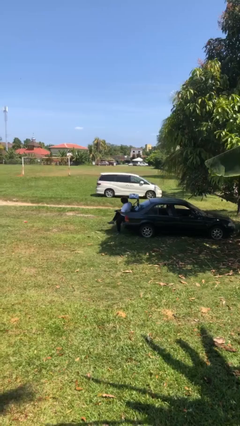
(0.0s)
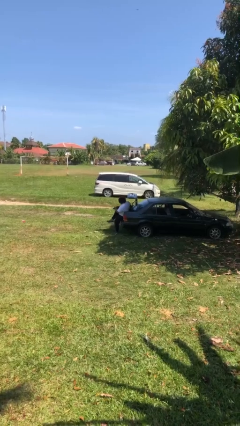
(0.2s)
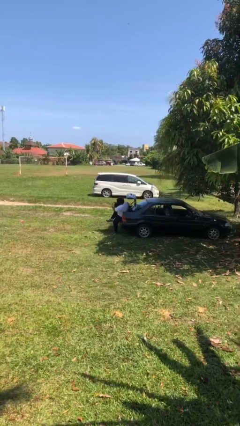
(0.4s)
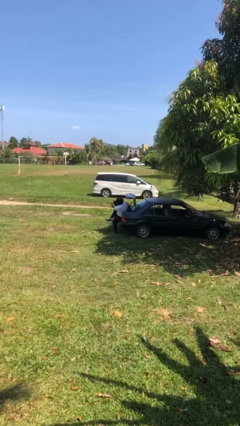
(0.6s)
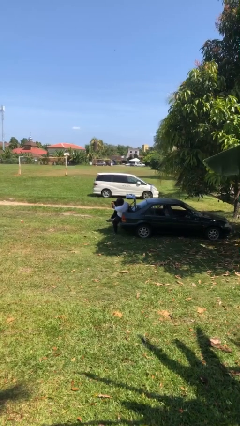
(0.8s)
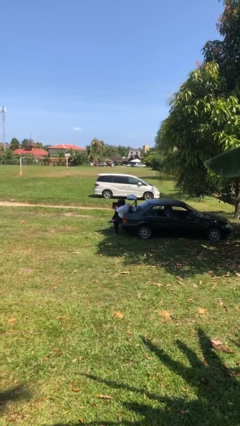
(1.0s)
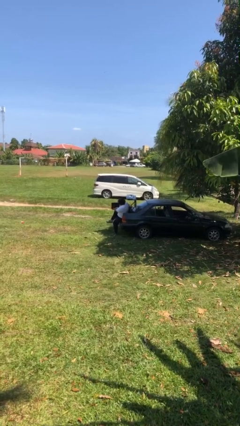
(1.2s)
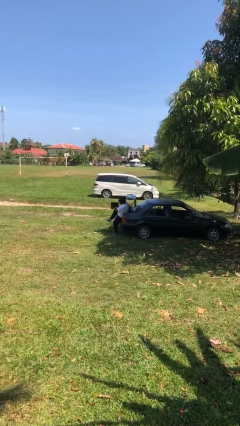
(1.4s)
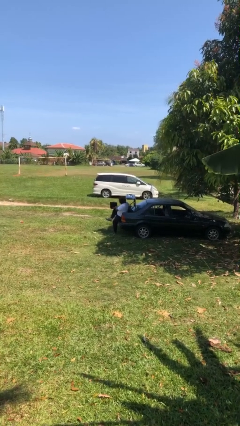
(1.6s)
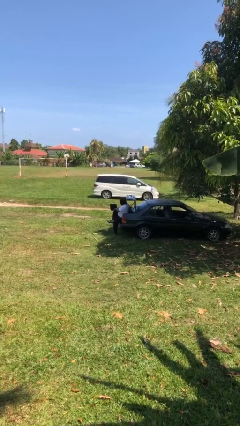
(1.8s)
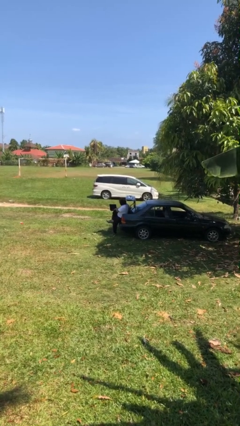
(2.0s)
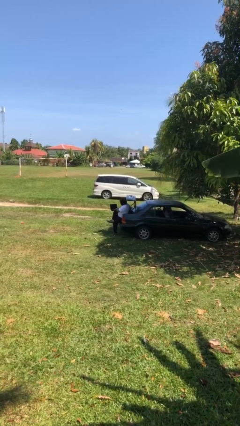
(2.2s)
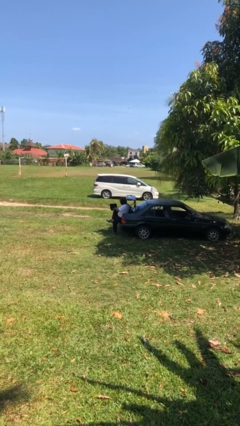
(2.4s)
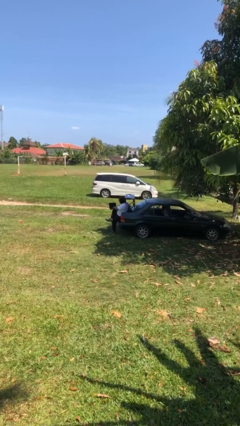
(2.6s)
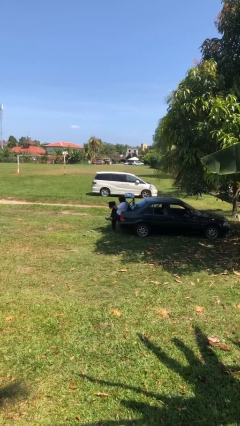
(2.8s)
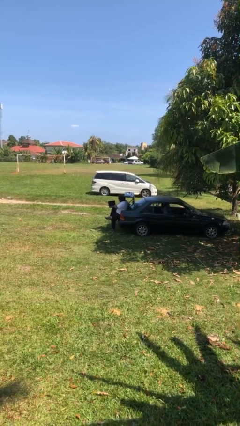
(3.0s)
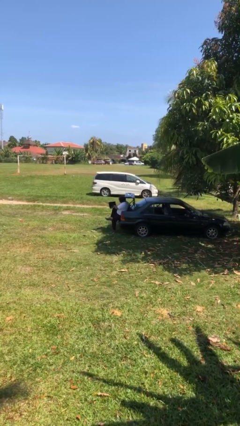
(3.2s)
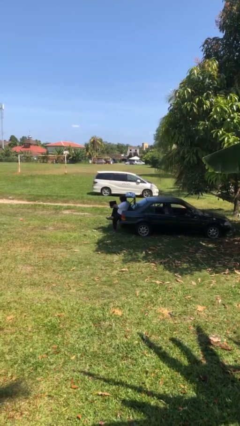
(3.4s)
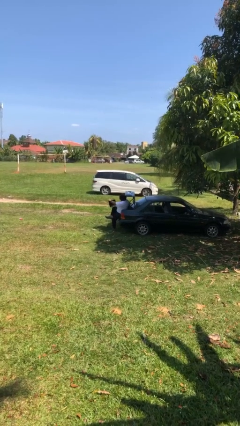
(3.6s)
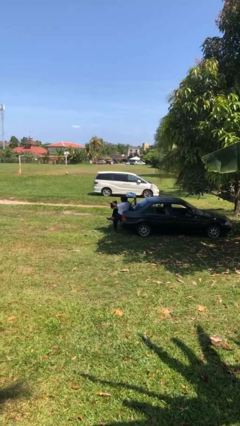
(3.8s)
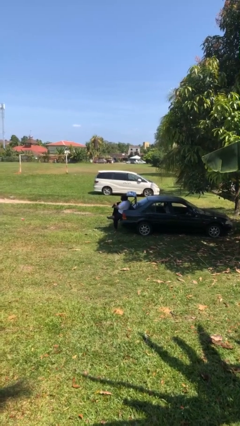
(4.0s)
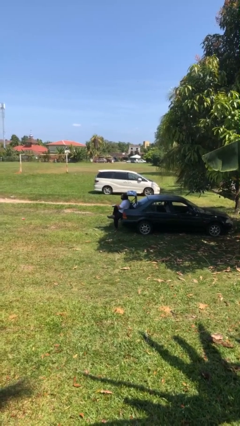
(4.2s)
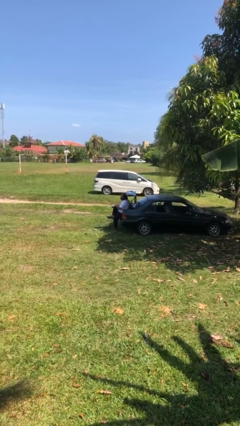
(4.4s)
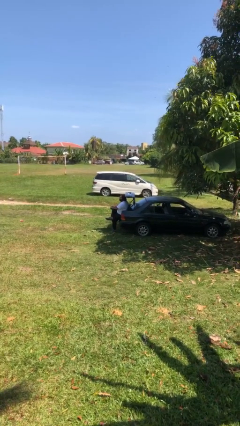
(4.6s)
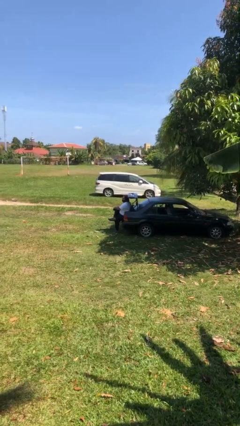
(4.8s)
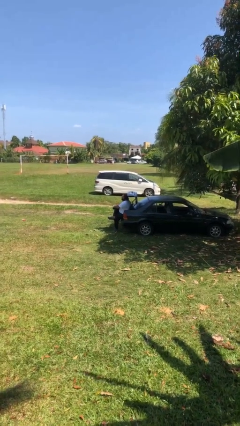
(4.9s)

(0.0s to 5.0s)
person interacts with laptop

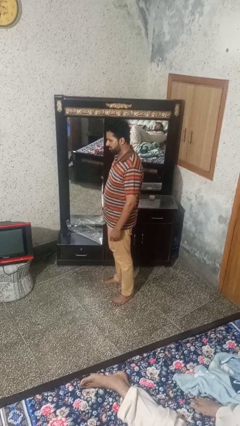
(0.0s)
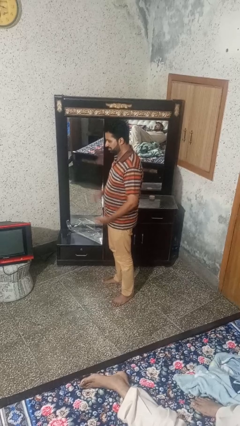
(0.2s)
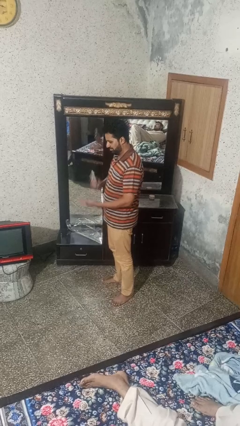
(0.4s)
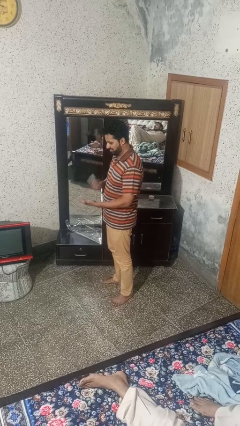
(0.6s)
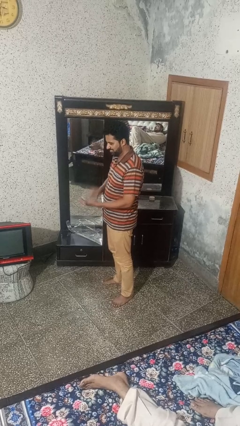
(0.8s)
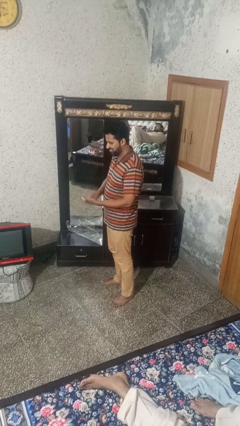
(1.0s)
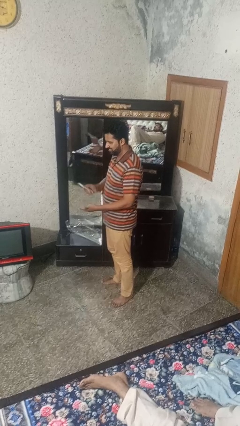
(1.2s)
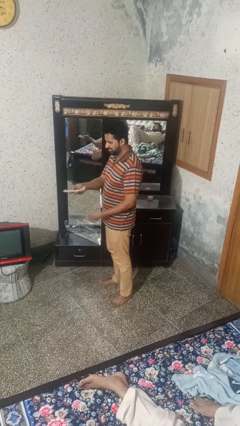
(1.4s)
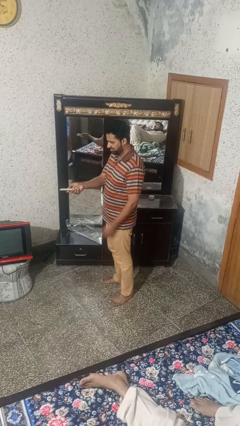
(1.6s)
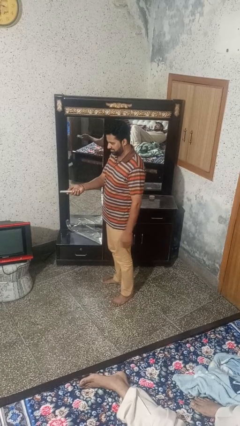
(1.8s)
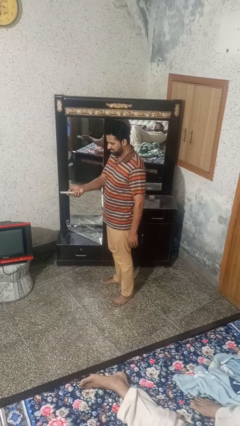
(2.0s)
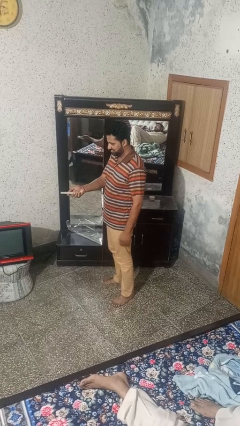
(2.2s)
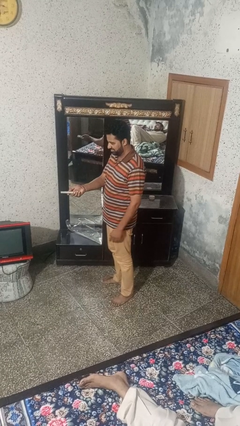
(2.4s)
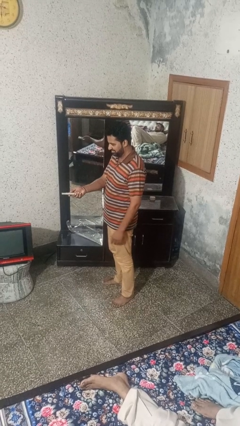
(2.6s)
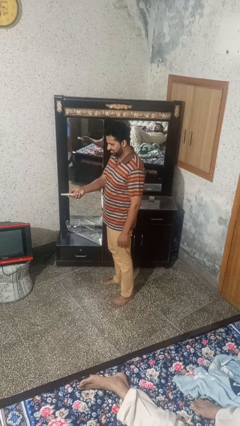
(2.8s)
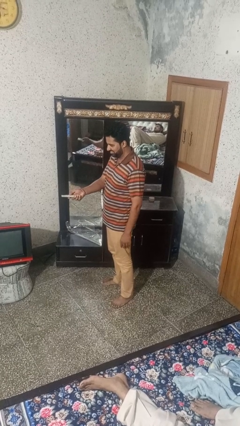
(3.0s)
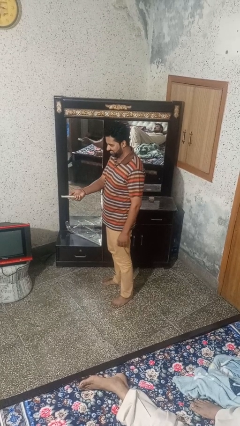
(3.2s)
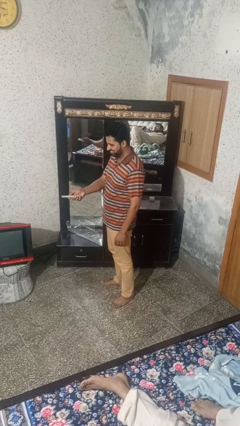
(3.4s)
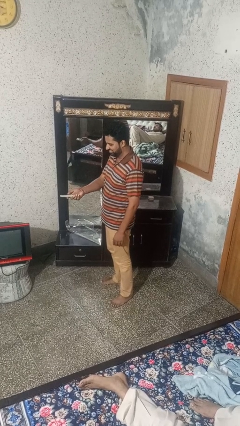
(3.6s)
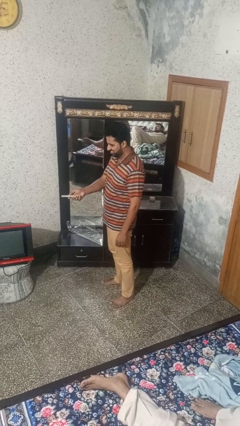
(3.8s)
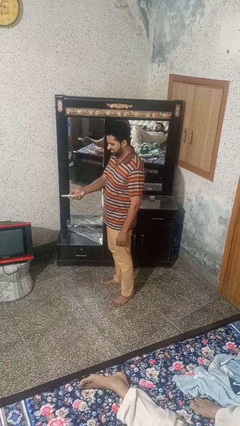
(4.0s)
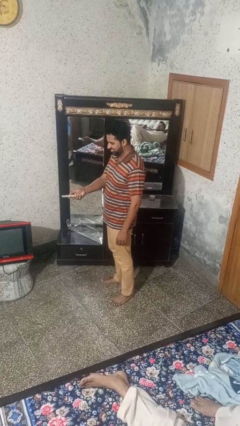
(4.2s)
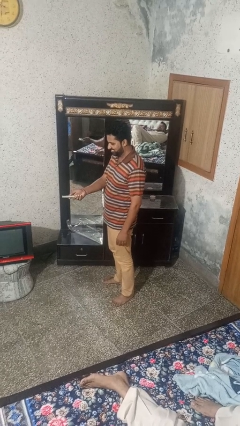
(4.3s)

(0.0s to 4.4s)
person uses television remote

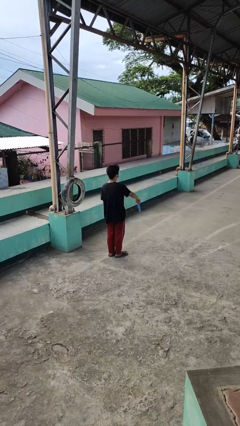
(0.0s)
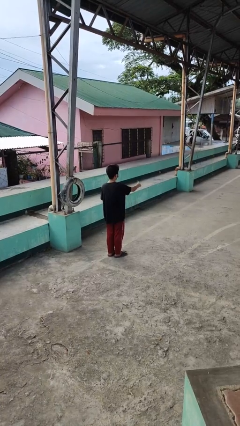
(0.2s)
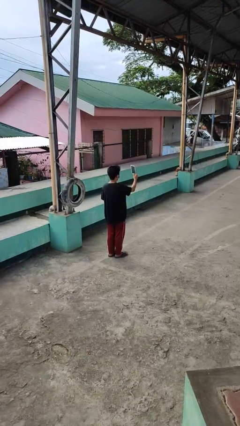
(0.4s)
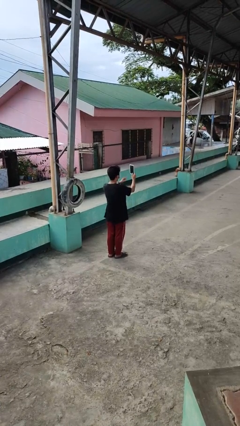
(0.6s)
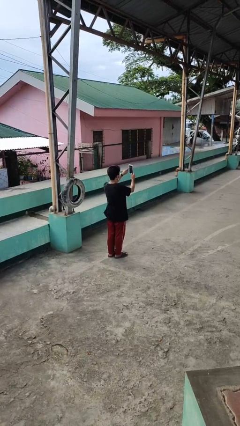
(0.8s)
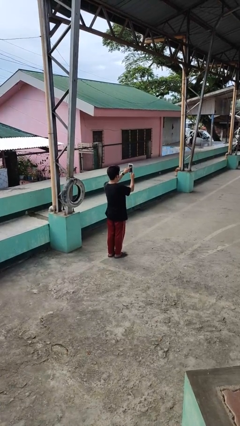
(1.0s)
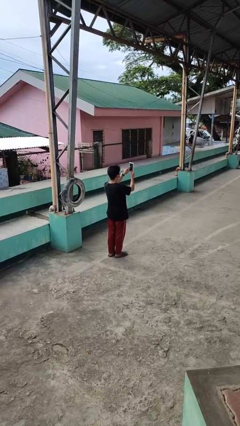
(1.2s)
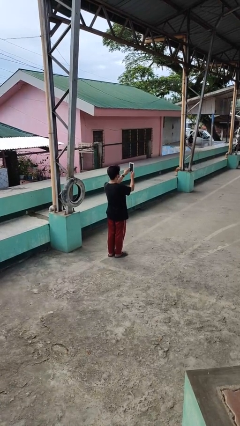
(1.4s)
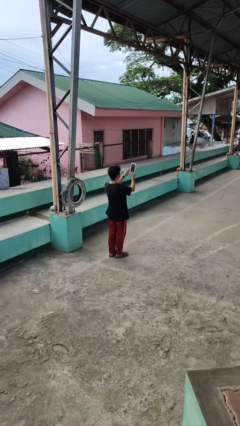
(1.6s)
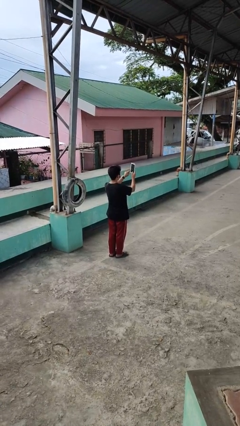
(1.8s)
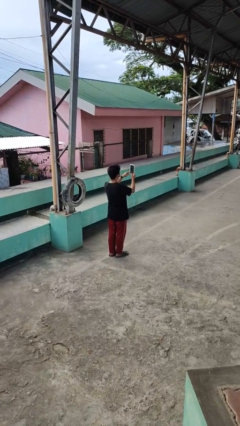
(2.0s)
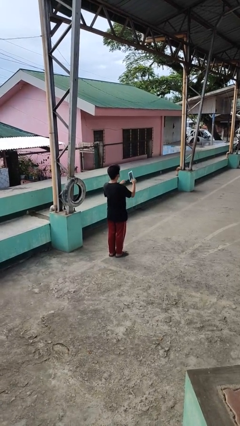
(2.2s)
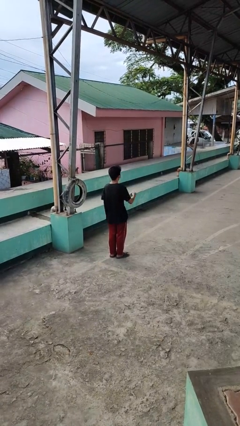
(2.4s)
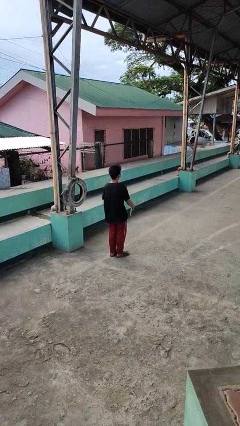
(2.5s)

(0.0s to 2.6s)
person interacts with tablet

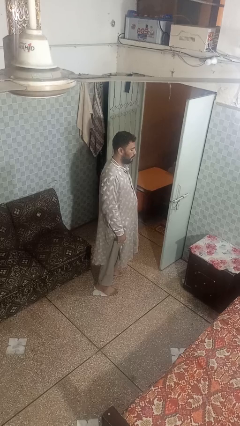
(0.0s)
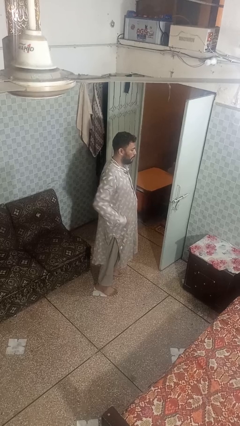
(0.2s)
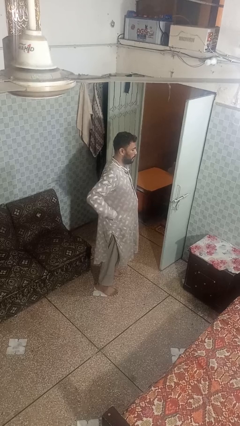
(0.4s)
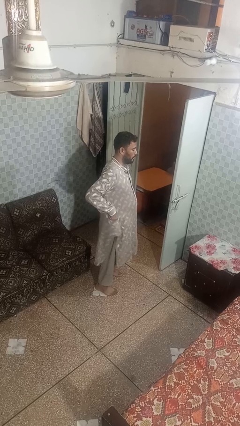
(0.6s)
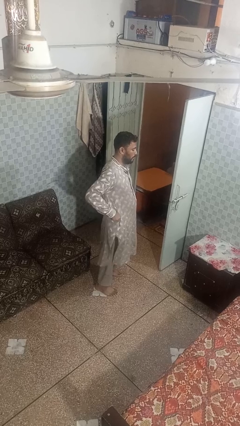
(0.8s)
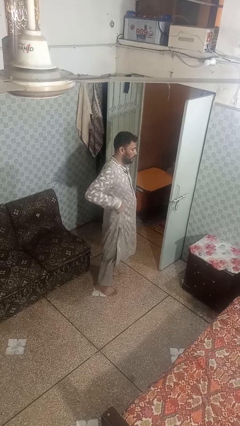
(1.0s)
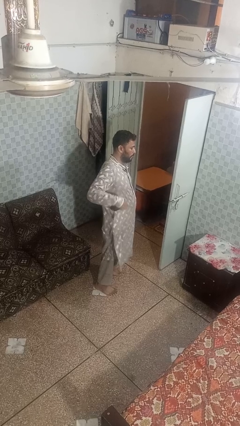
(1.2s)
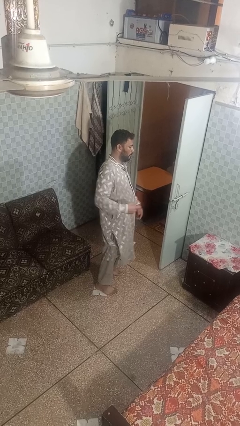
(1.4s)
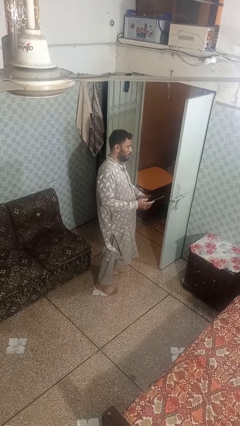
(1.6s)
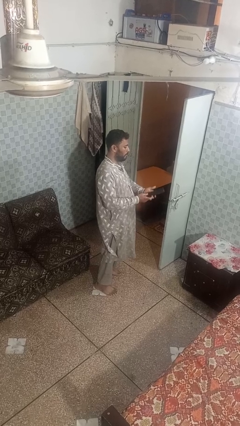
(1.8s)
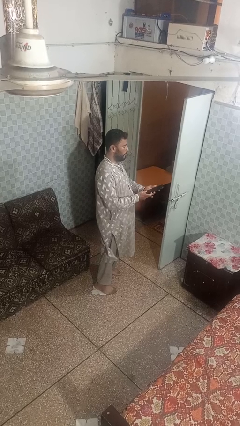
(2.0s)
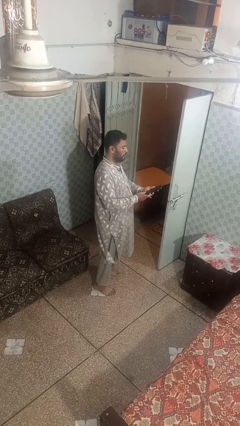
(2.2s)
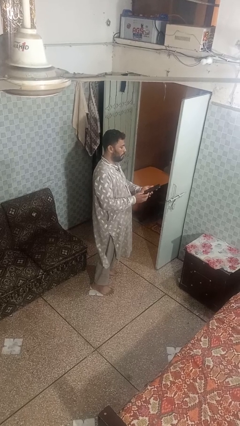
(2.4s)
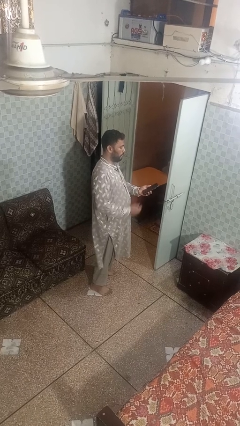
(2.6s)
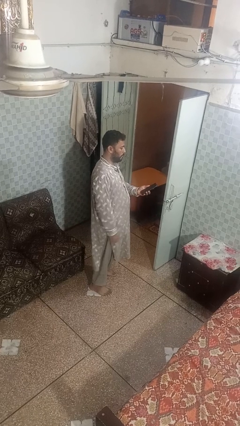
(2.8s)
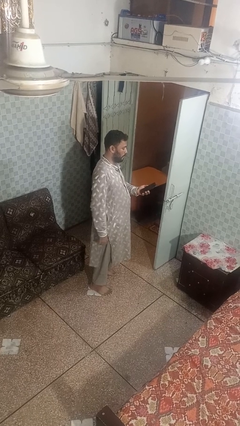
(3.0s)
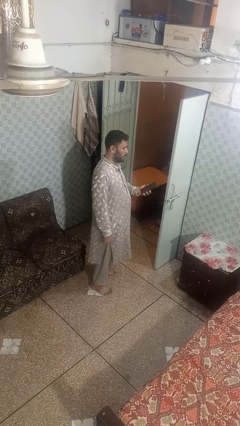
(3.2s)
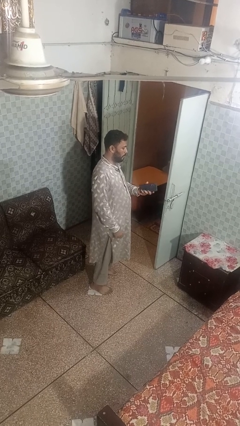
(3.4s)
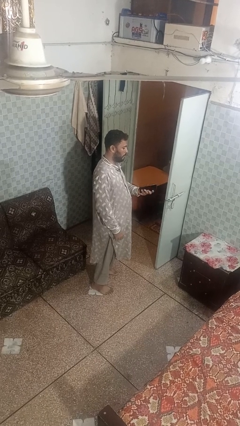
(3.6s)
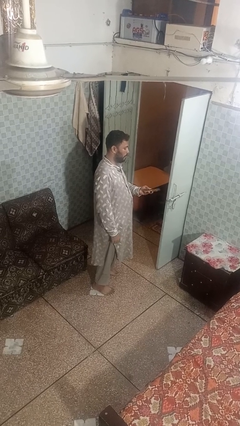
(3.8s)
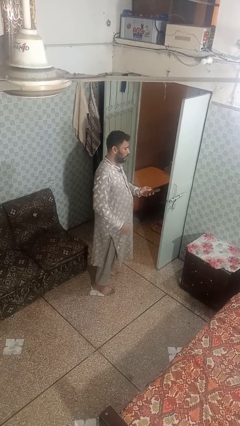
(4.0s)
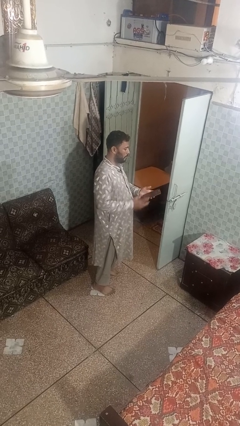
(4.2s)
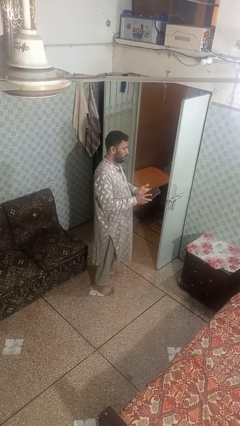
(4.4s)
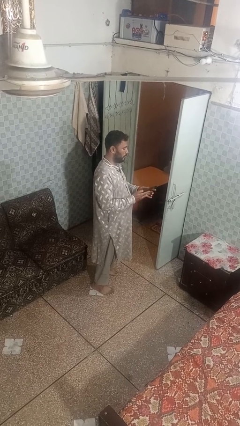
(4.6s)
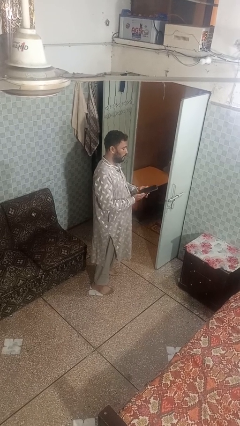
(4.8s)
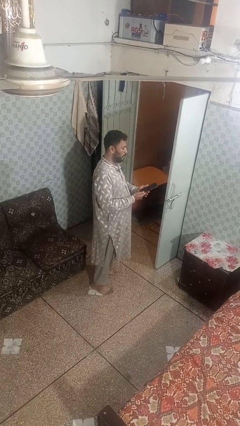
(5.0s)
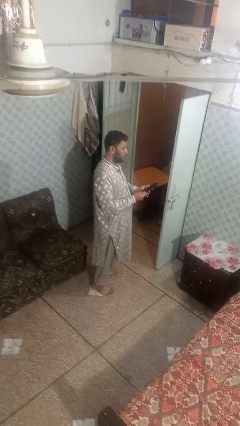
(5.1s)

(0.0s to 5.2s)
person takes phone from pocket

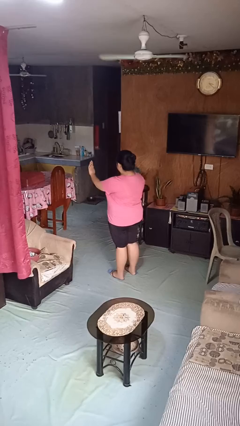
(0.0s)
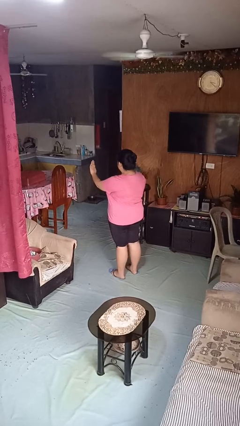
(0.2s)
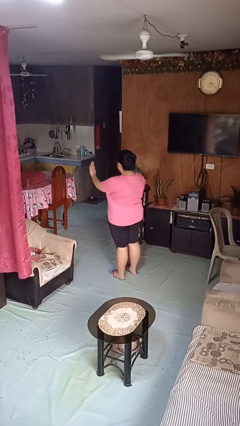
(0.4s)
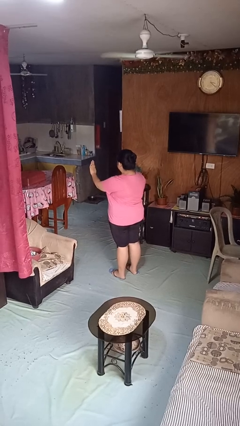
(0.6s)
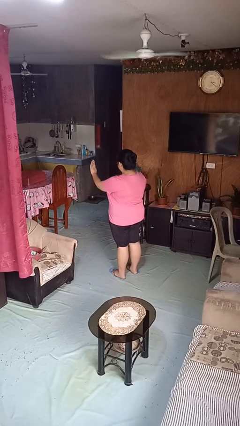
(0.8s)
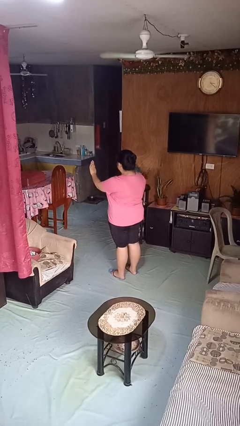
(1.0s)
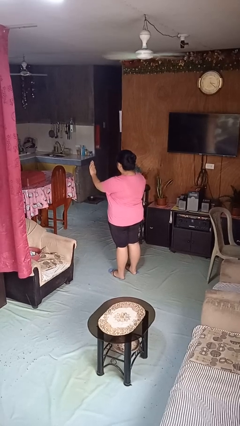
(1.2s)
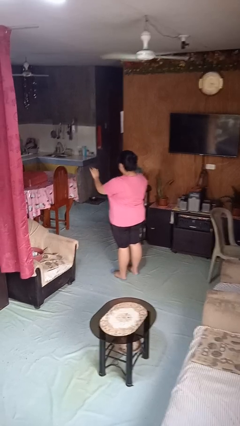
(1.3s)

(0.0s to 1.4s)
person gestures stop
